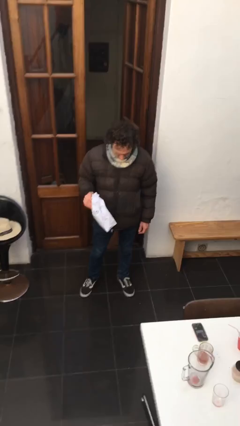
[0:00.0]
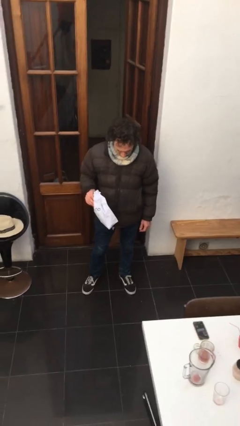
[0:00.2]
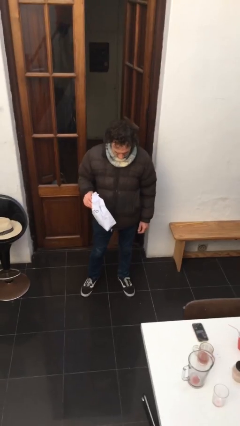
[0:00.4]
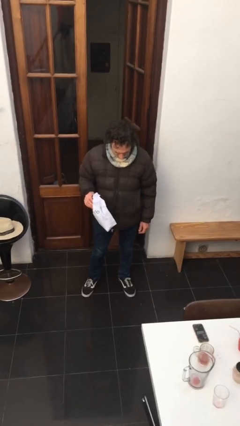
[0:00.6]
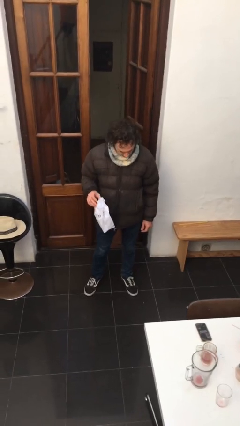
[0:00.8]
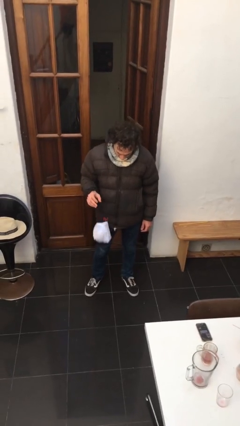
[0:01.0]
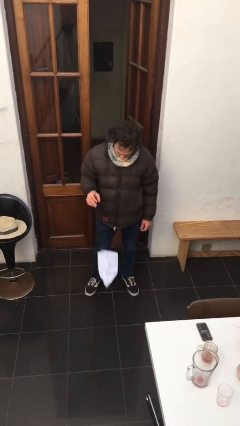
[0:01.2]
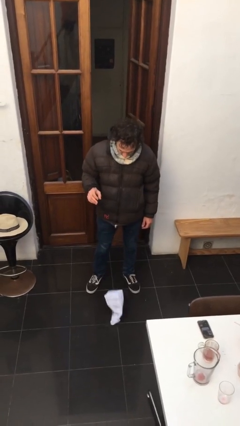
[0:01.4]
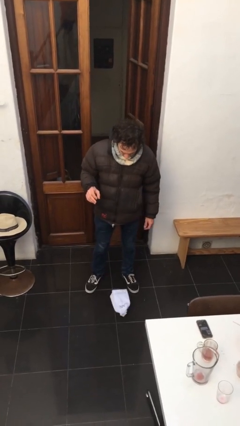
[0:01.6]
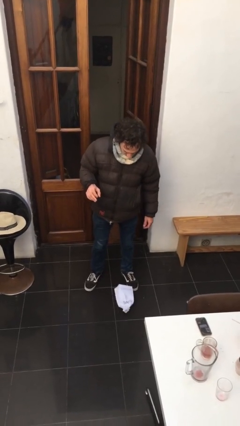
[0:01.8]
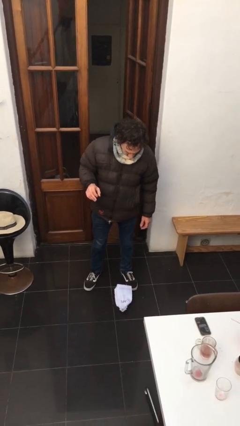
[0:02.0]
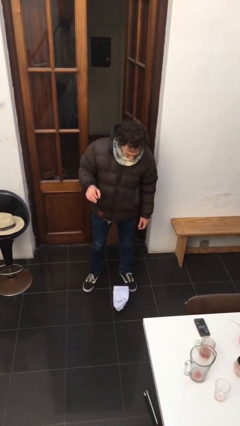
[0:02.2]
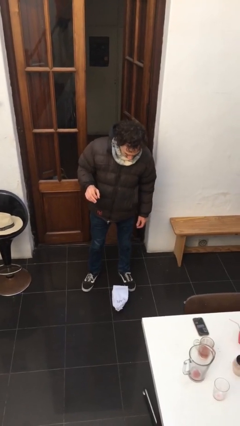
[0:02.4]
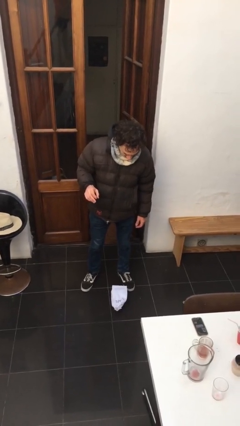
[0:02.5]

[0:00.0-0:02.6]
person drops object

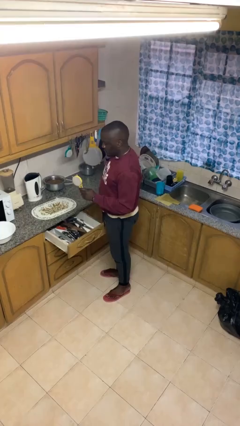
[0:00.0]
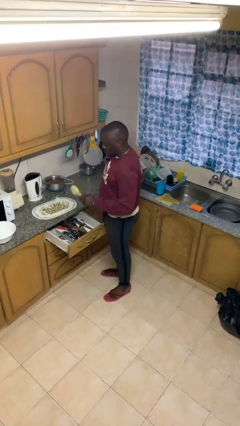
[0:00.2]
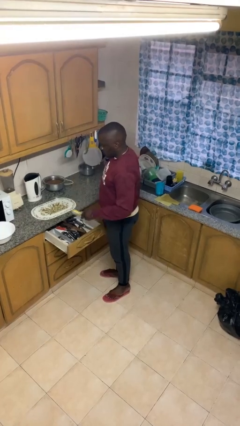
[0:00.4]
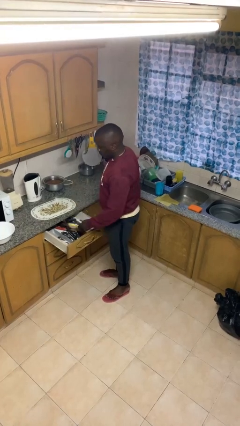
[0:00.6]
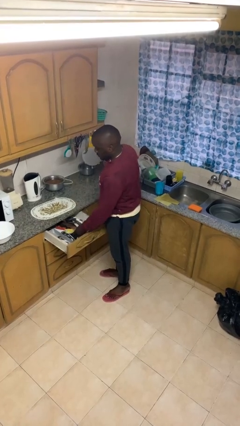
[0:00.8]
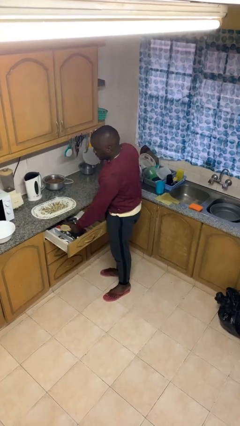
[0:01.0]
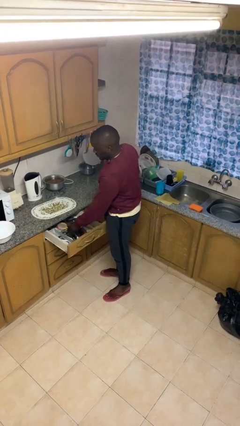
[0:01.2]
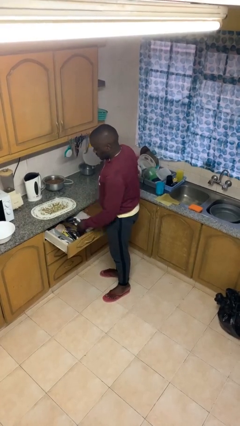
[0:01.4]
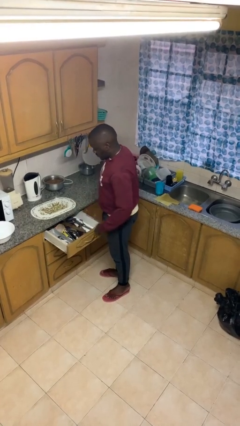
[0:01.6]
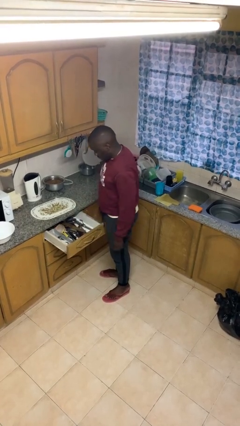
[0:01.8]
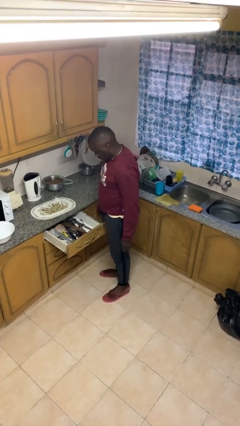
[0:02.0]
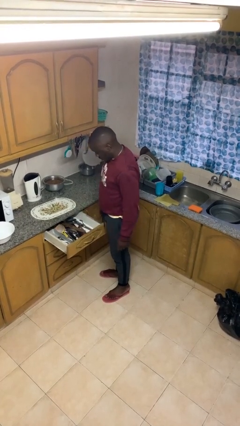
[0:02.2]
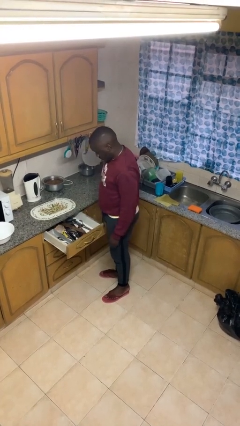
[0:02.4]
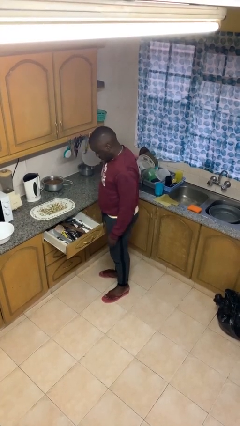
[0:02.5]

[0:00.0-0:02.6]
person puts object into kitchen drawer

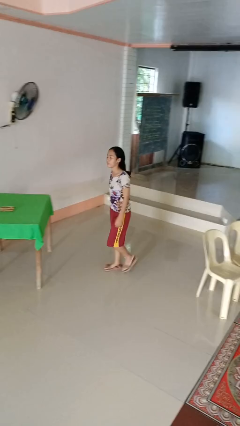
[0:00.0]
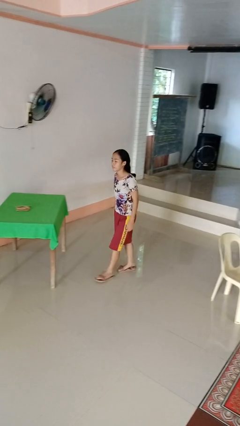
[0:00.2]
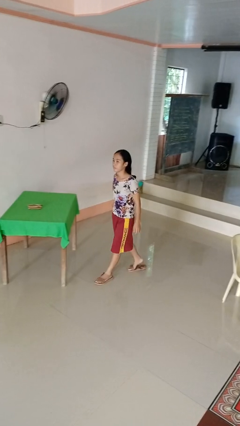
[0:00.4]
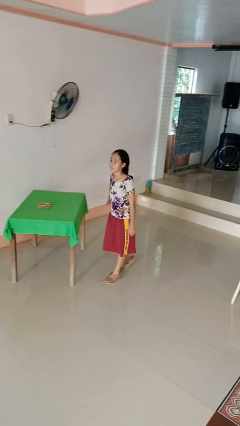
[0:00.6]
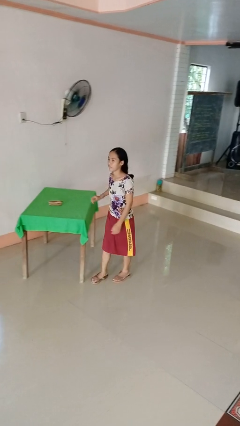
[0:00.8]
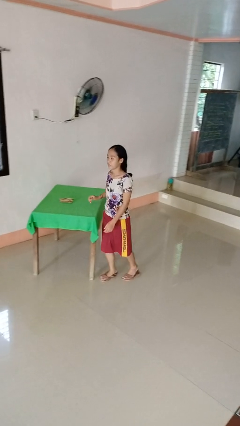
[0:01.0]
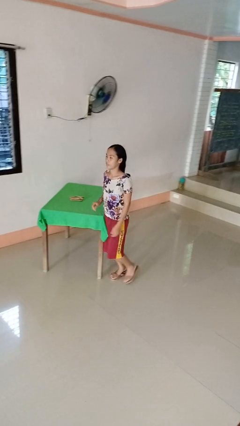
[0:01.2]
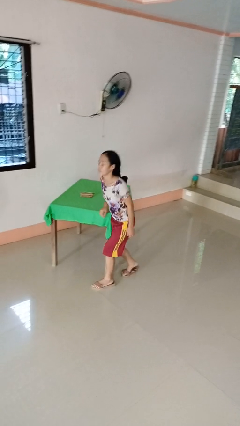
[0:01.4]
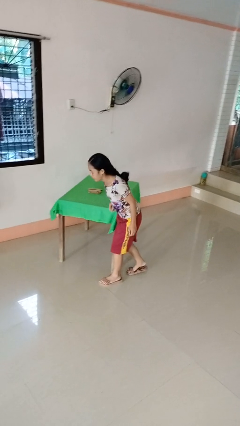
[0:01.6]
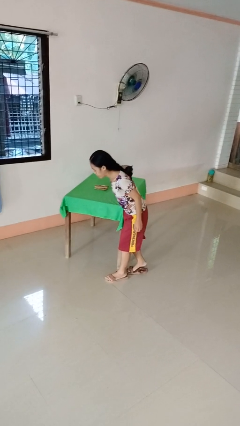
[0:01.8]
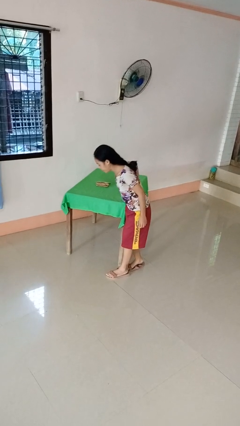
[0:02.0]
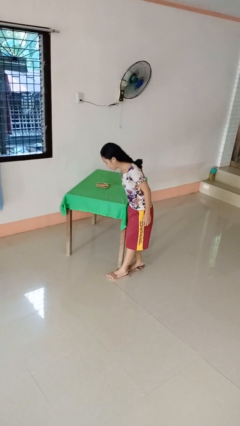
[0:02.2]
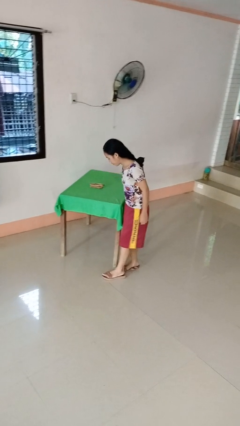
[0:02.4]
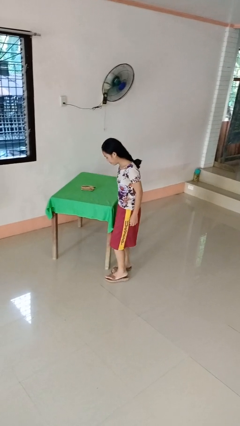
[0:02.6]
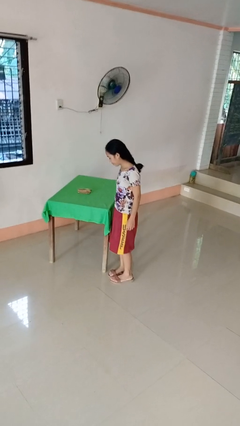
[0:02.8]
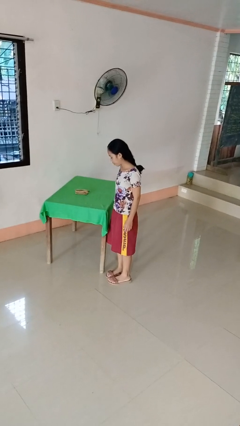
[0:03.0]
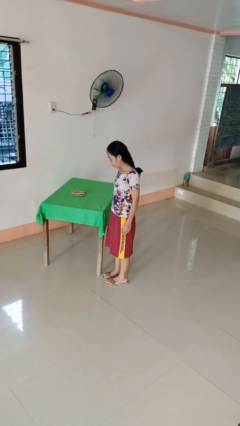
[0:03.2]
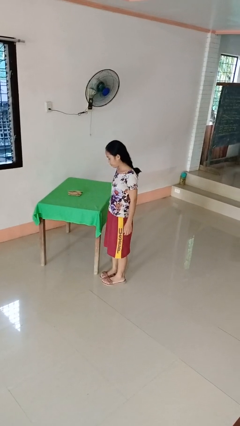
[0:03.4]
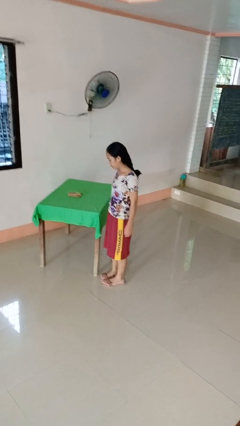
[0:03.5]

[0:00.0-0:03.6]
person bumps into table

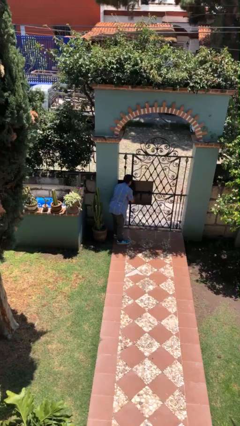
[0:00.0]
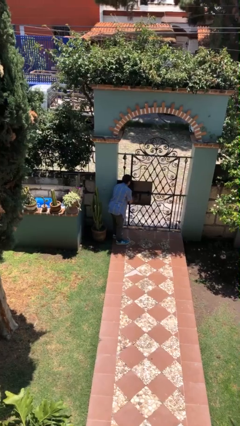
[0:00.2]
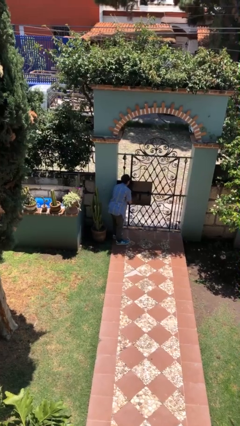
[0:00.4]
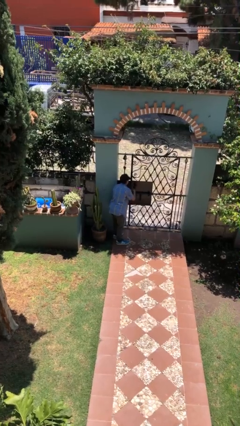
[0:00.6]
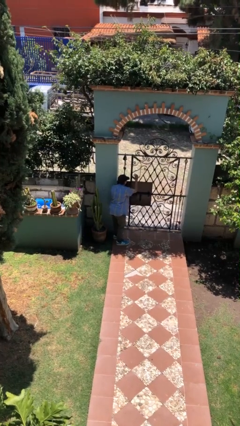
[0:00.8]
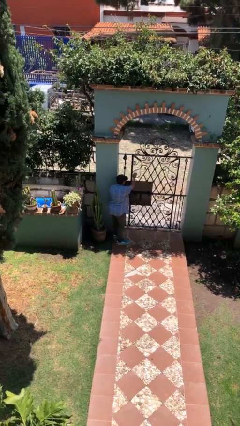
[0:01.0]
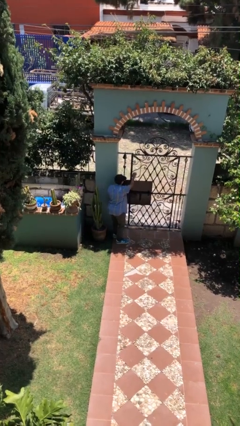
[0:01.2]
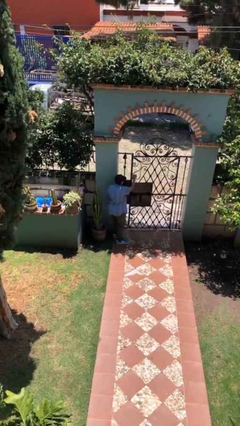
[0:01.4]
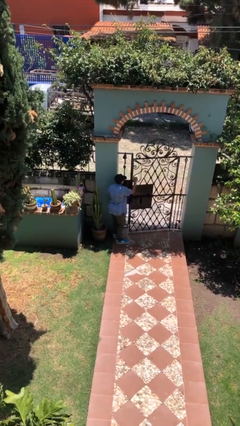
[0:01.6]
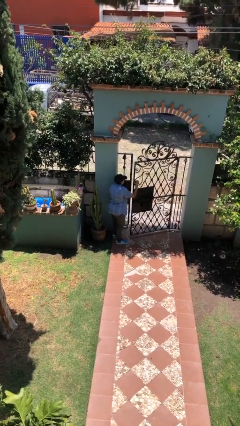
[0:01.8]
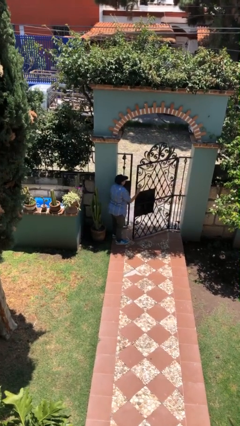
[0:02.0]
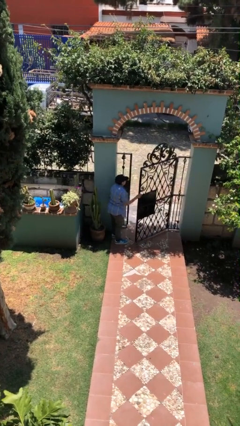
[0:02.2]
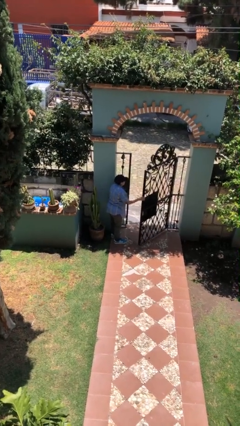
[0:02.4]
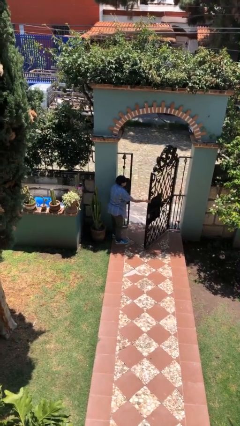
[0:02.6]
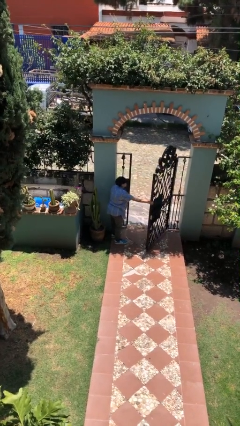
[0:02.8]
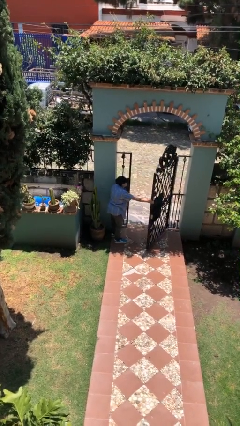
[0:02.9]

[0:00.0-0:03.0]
person opens facility door

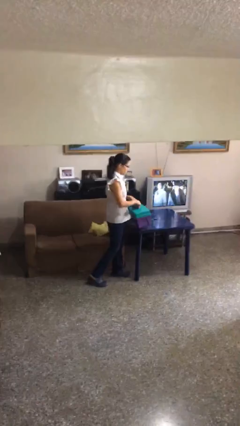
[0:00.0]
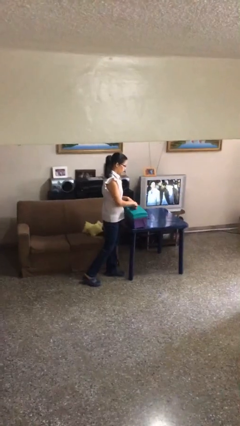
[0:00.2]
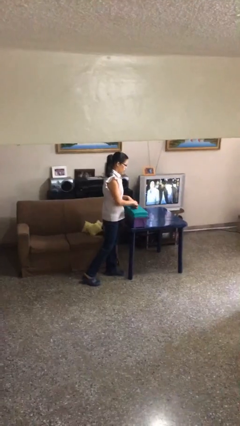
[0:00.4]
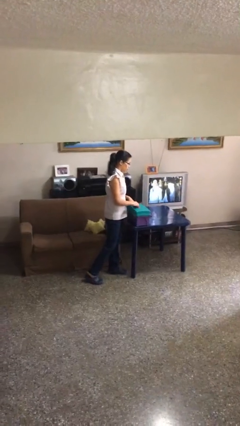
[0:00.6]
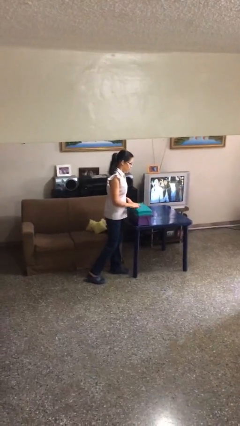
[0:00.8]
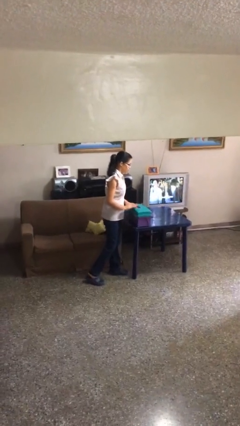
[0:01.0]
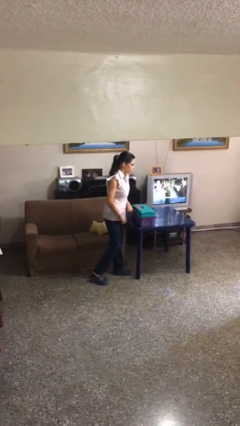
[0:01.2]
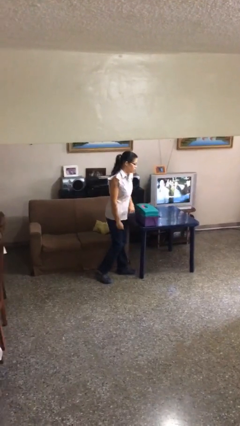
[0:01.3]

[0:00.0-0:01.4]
person puts down object on table

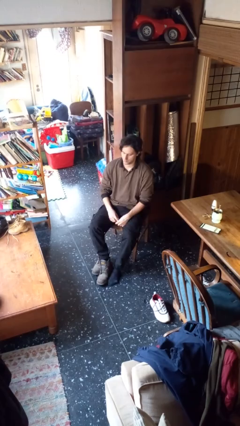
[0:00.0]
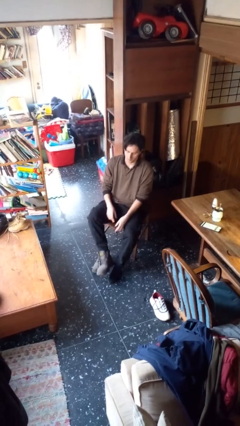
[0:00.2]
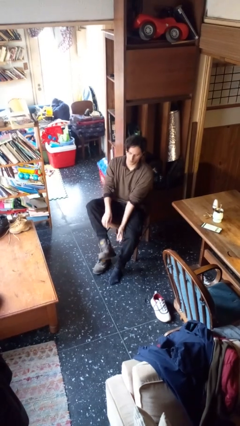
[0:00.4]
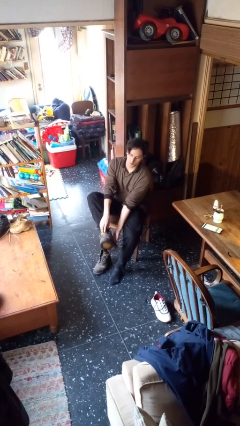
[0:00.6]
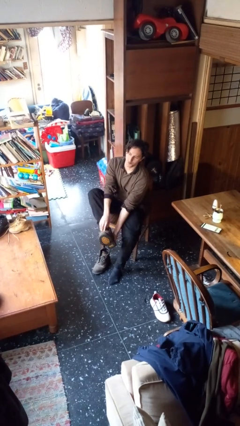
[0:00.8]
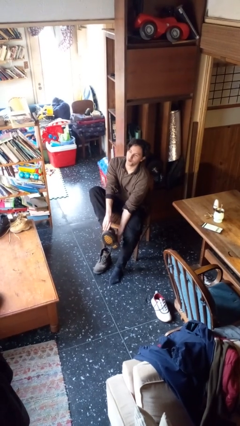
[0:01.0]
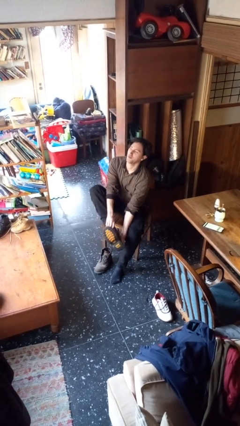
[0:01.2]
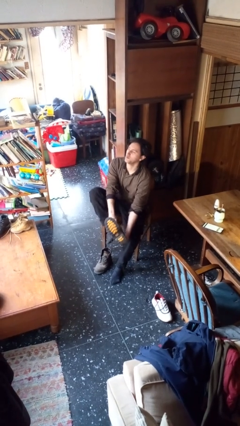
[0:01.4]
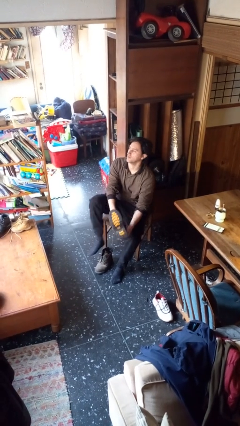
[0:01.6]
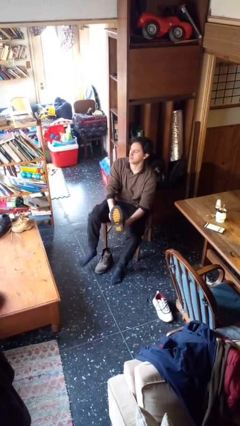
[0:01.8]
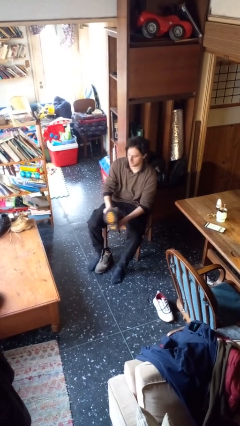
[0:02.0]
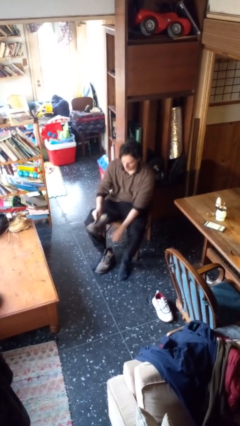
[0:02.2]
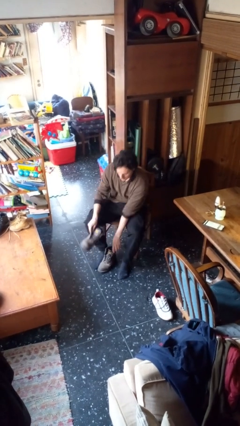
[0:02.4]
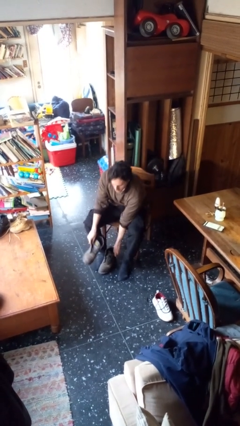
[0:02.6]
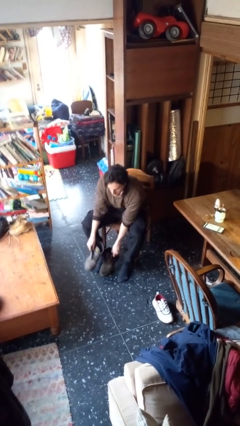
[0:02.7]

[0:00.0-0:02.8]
person takes off boots

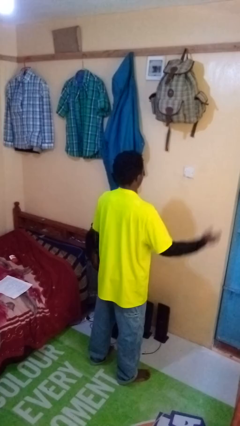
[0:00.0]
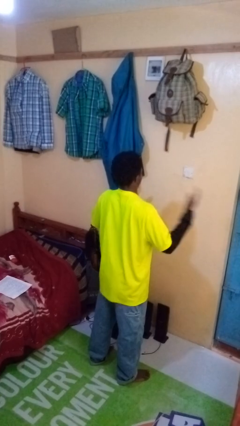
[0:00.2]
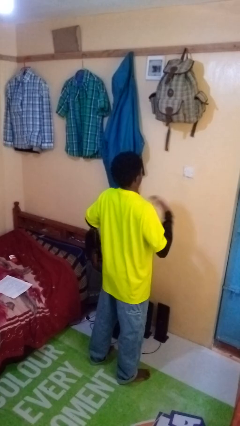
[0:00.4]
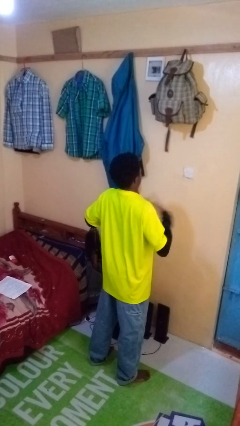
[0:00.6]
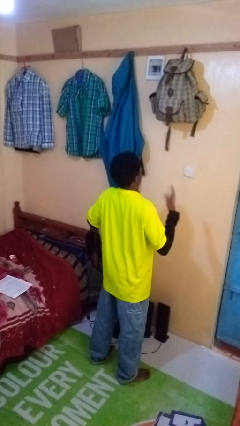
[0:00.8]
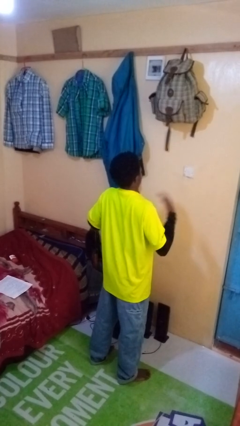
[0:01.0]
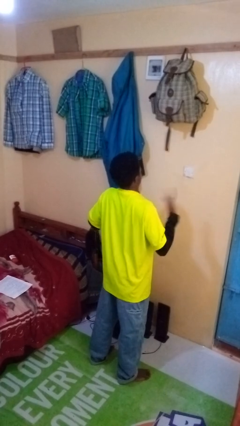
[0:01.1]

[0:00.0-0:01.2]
person drums on chest
